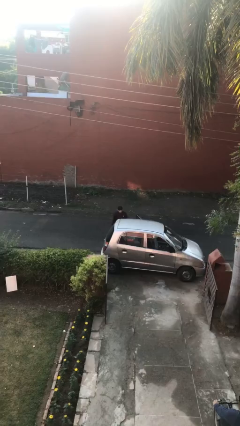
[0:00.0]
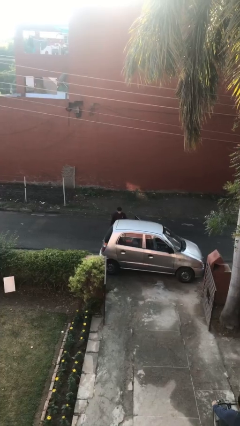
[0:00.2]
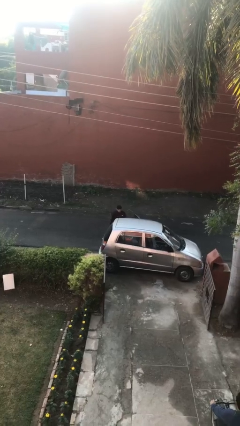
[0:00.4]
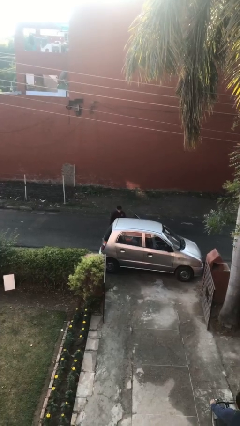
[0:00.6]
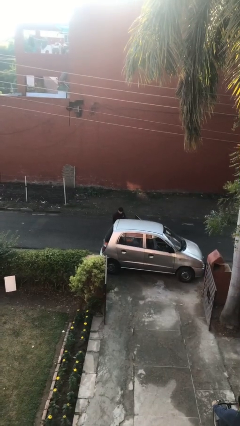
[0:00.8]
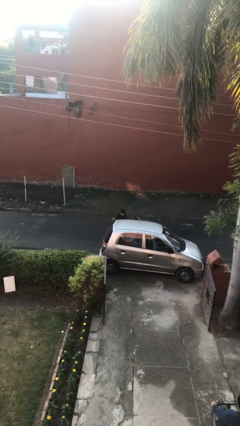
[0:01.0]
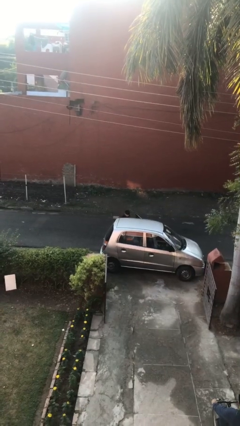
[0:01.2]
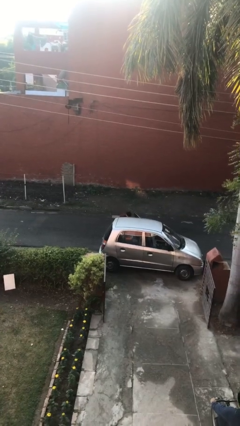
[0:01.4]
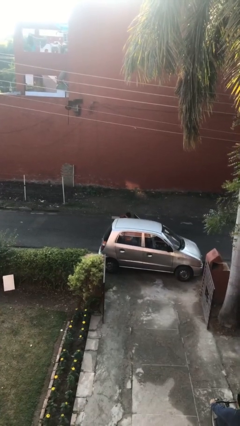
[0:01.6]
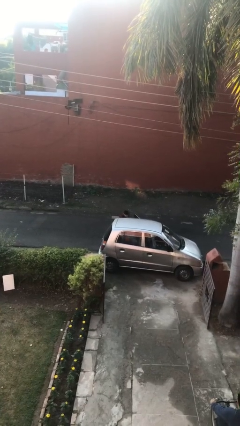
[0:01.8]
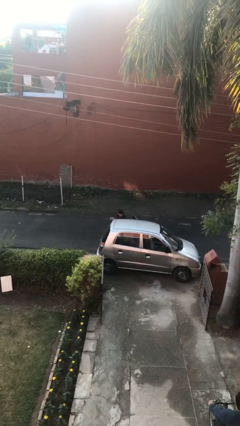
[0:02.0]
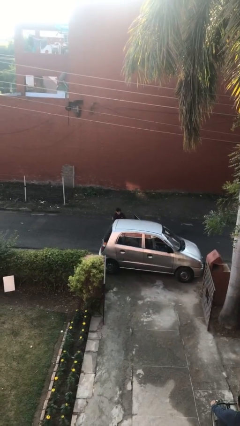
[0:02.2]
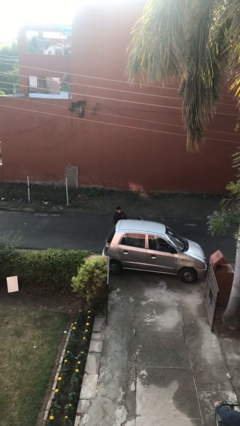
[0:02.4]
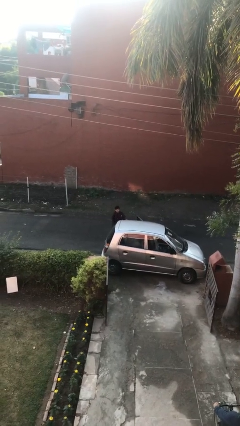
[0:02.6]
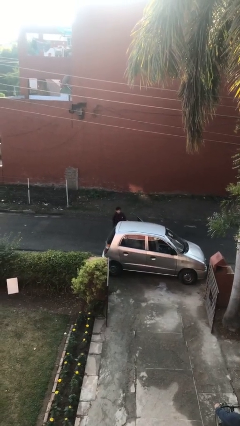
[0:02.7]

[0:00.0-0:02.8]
person unloads car

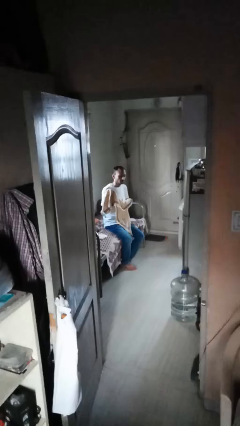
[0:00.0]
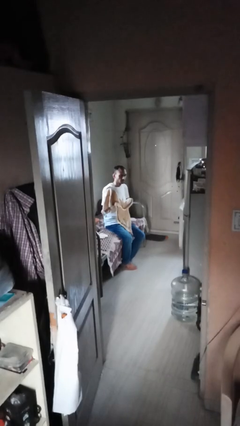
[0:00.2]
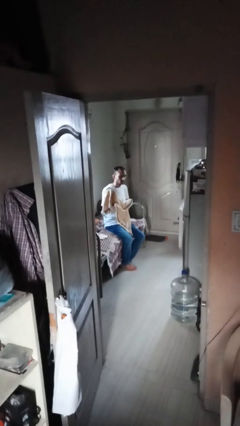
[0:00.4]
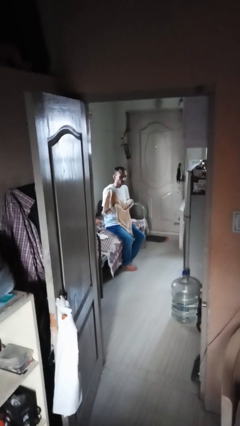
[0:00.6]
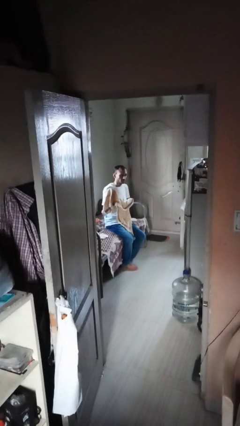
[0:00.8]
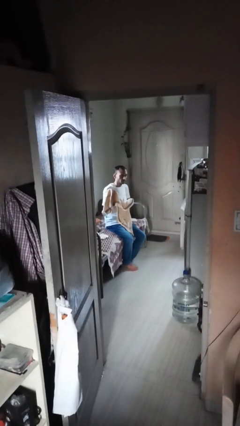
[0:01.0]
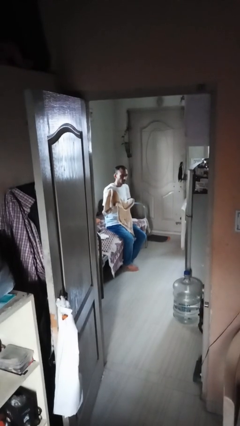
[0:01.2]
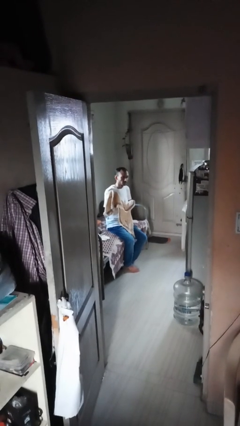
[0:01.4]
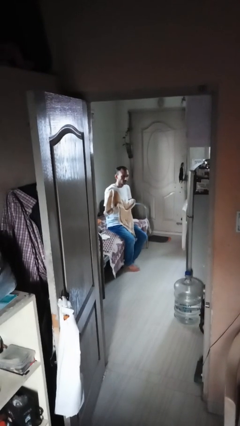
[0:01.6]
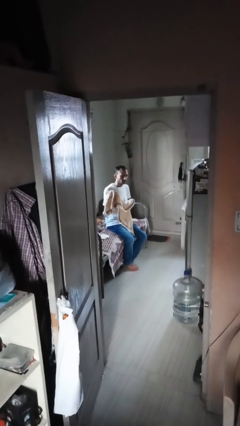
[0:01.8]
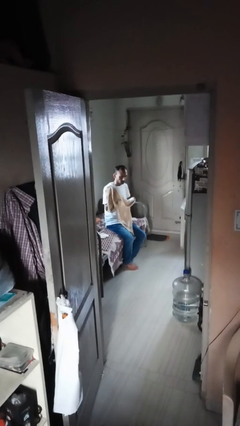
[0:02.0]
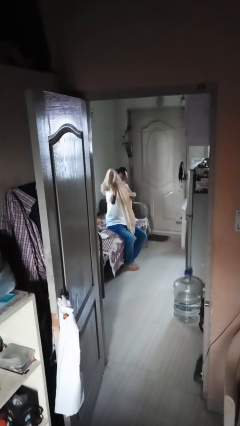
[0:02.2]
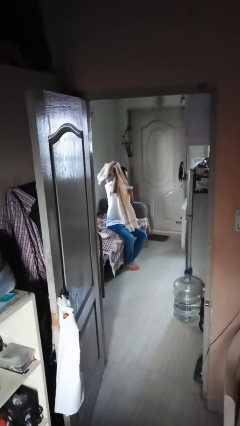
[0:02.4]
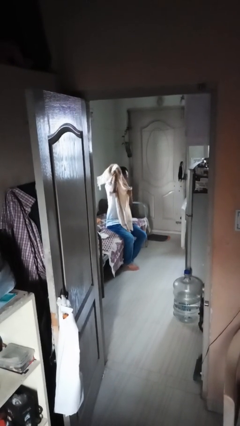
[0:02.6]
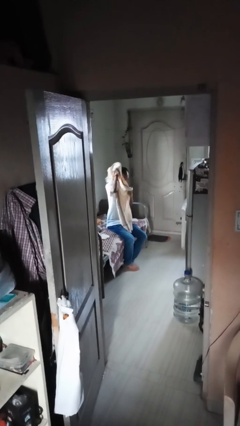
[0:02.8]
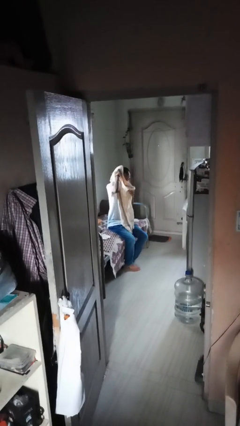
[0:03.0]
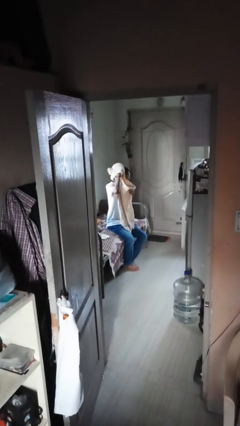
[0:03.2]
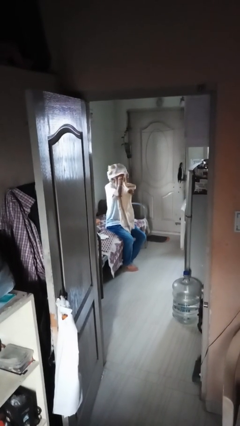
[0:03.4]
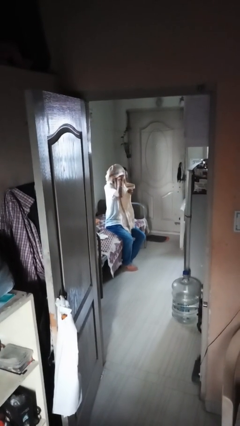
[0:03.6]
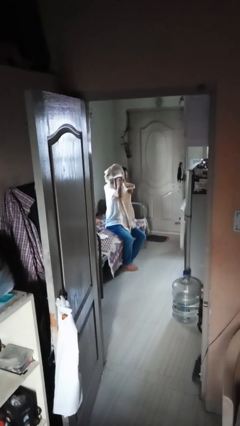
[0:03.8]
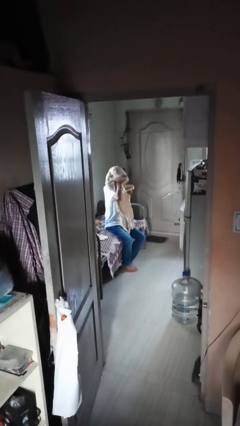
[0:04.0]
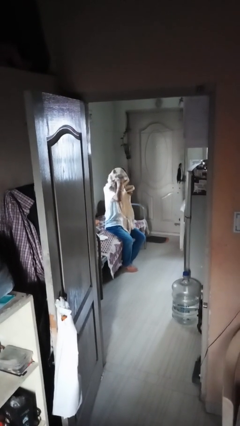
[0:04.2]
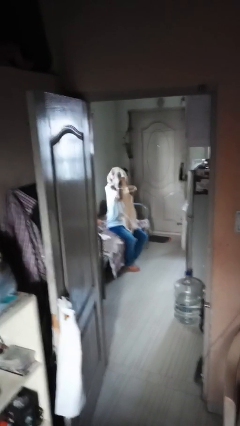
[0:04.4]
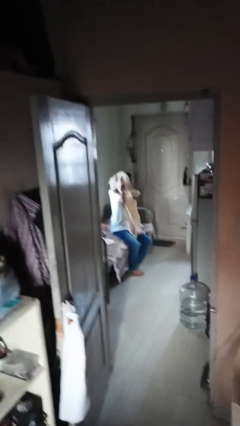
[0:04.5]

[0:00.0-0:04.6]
person dries hair with towel

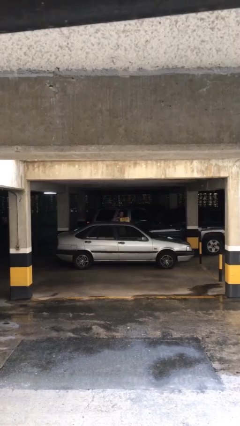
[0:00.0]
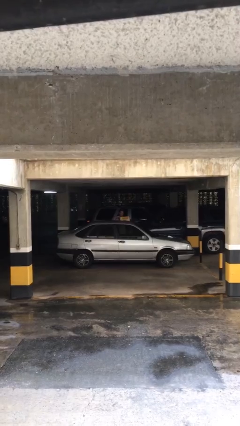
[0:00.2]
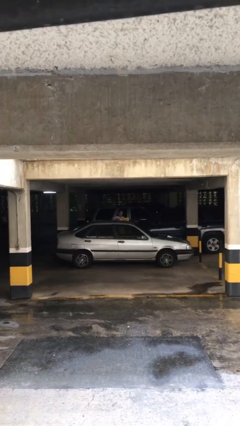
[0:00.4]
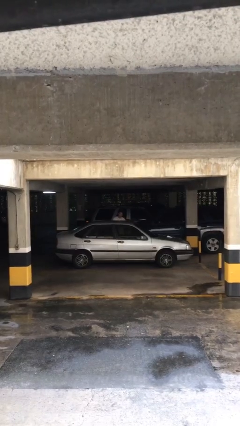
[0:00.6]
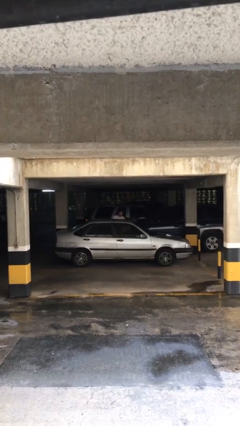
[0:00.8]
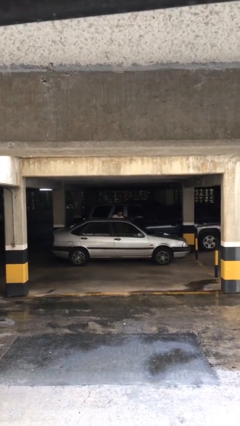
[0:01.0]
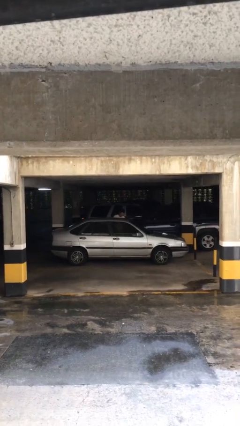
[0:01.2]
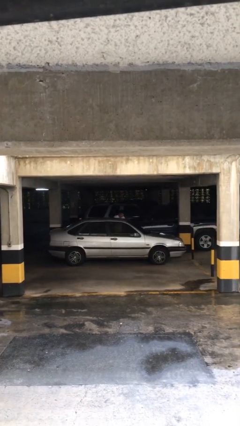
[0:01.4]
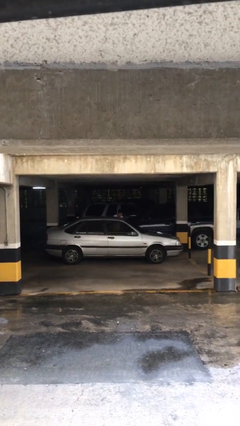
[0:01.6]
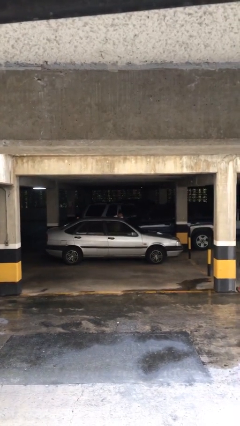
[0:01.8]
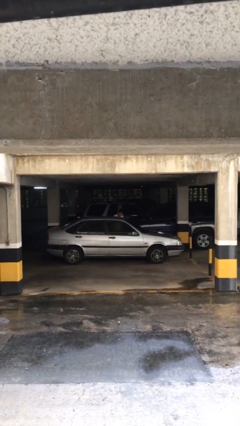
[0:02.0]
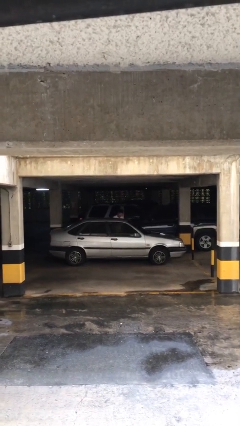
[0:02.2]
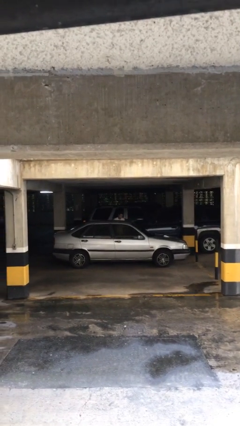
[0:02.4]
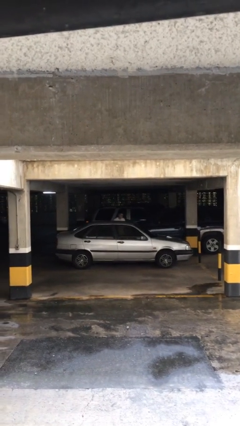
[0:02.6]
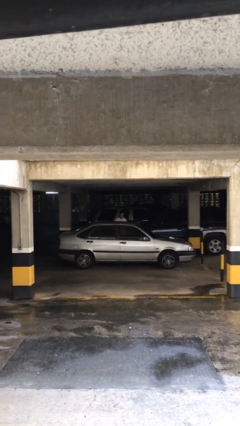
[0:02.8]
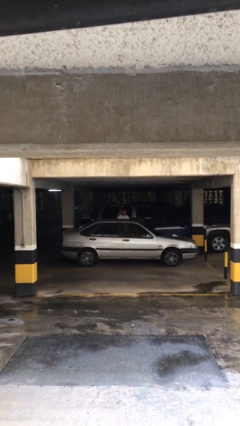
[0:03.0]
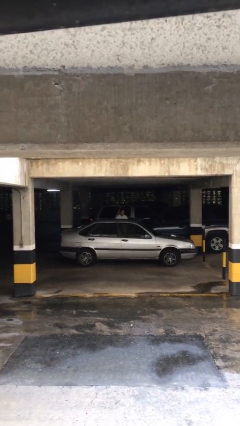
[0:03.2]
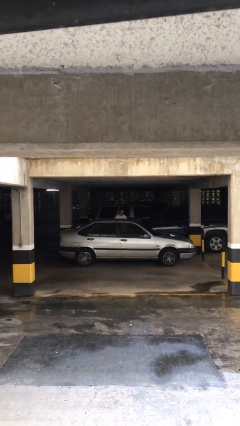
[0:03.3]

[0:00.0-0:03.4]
person loads car

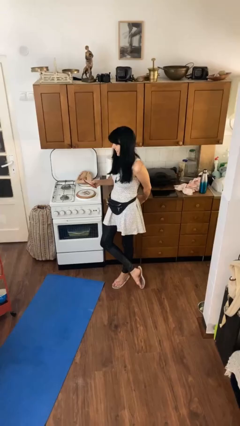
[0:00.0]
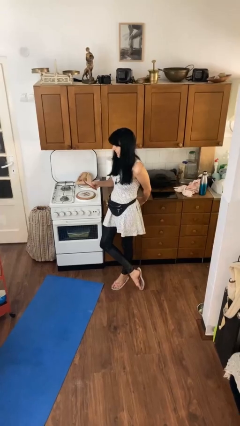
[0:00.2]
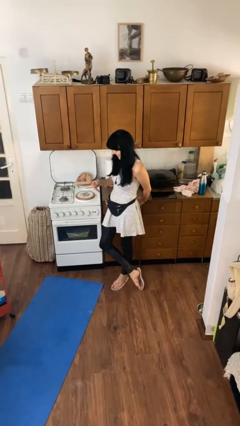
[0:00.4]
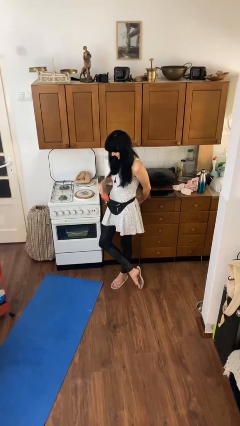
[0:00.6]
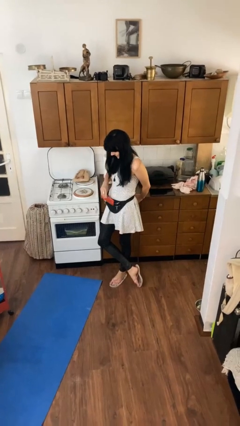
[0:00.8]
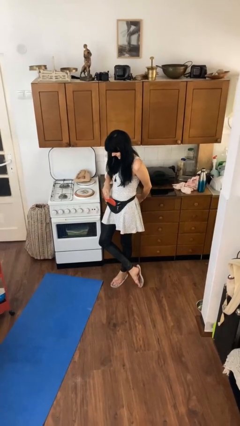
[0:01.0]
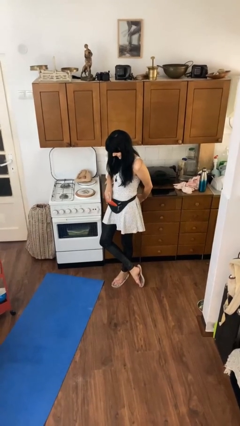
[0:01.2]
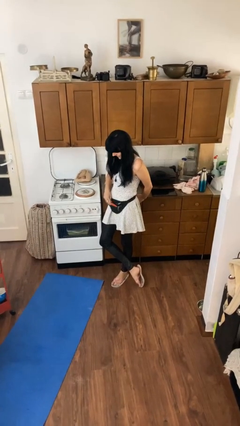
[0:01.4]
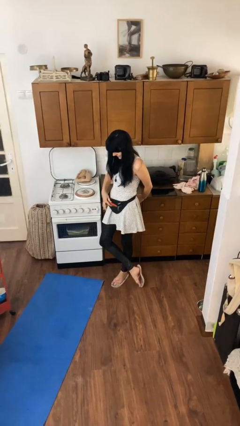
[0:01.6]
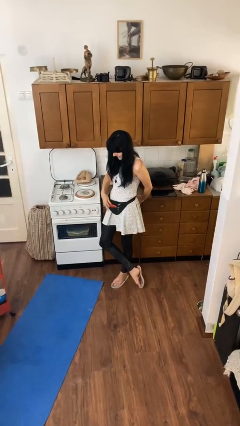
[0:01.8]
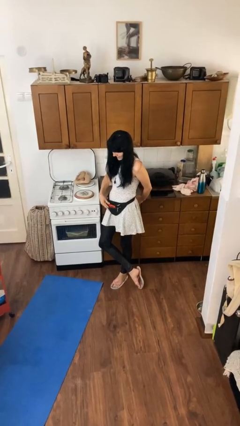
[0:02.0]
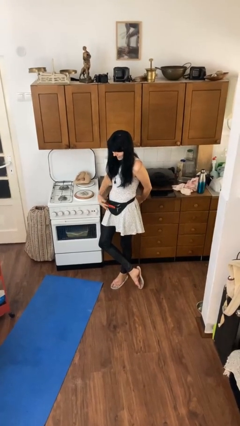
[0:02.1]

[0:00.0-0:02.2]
person puts phone into pocket

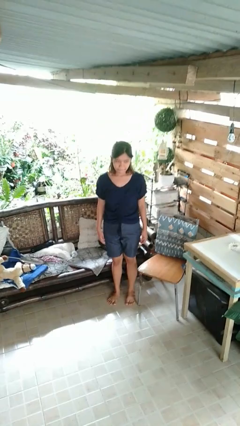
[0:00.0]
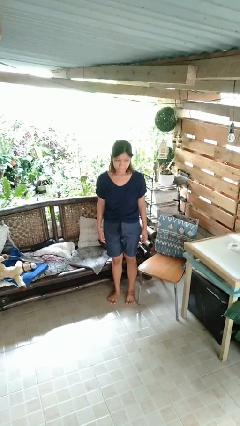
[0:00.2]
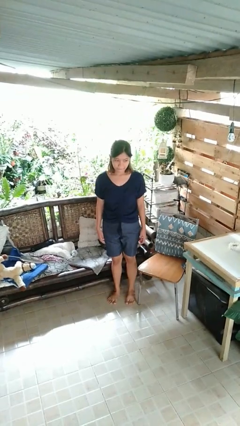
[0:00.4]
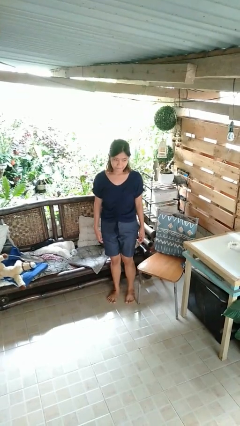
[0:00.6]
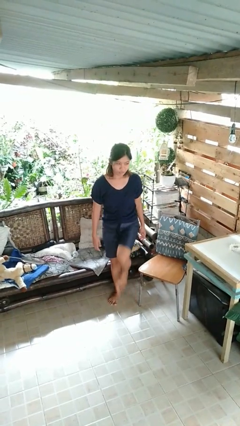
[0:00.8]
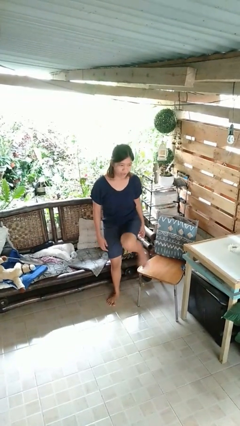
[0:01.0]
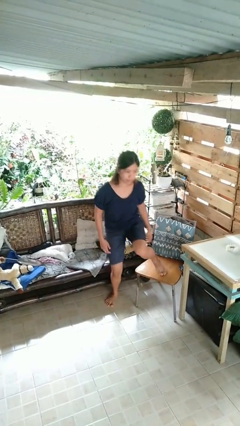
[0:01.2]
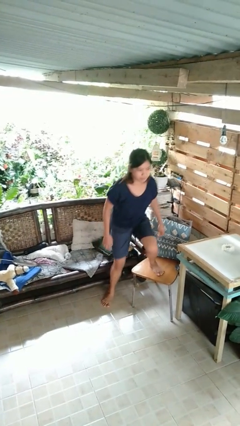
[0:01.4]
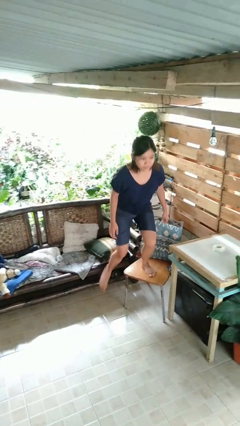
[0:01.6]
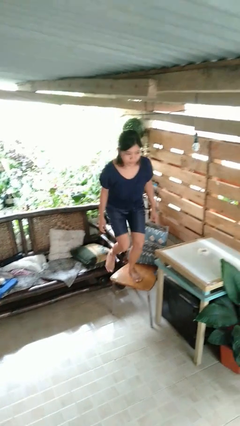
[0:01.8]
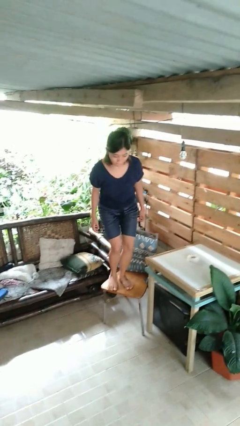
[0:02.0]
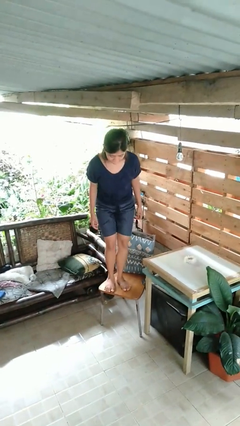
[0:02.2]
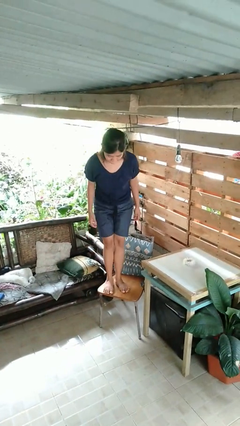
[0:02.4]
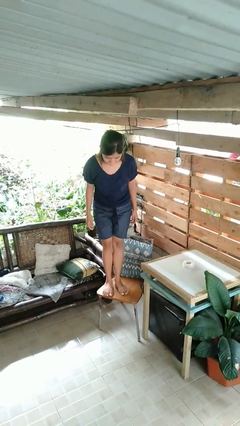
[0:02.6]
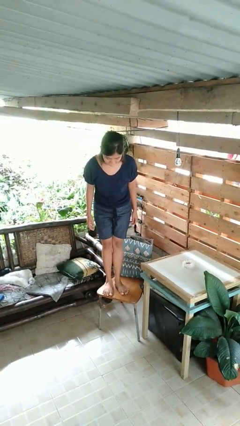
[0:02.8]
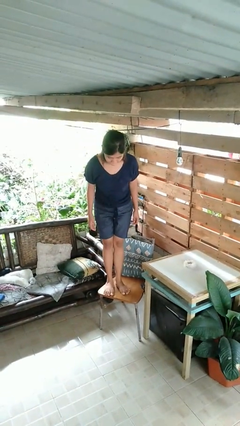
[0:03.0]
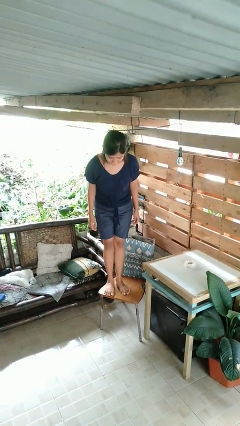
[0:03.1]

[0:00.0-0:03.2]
person climbs on chair

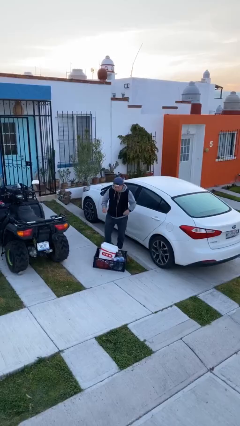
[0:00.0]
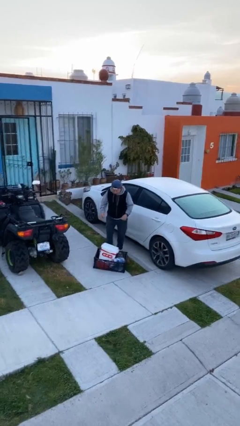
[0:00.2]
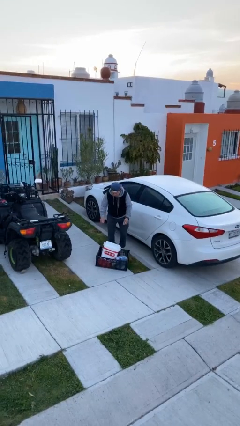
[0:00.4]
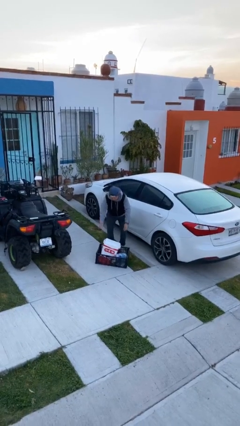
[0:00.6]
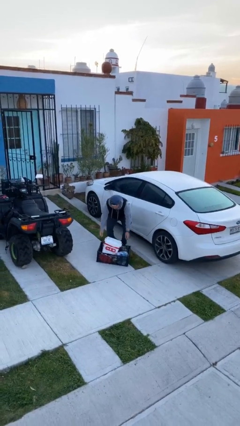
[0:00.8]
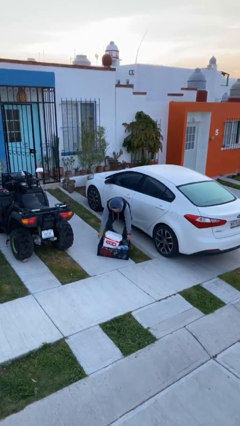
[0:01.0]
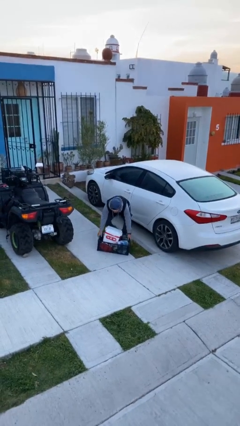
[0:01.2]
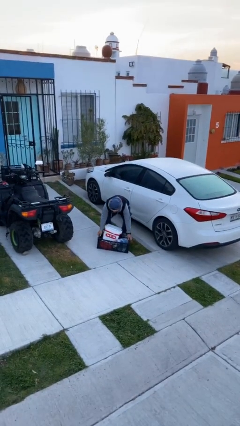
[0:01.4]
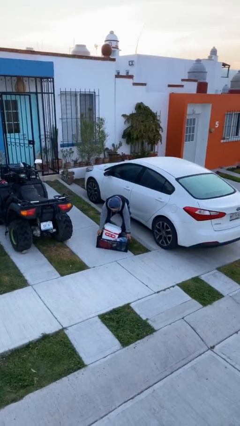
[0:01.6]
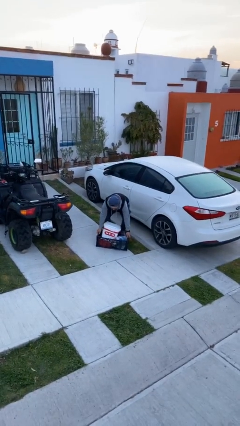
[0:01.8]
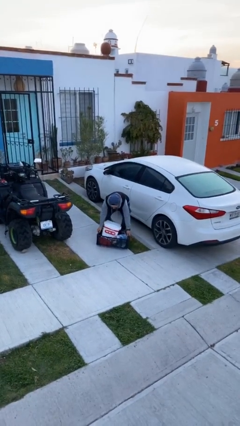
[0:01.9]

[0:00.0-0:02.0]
person picks up object from floor
